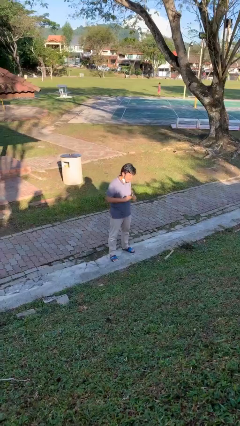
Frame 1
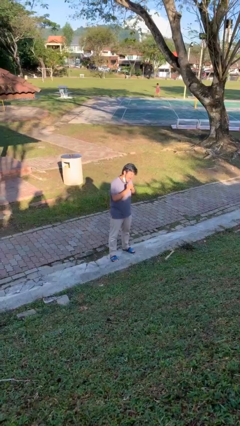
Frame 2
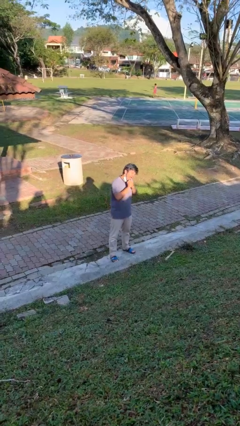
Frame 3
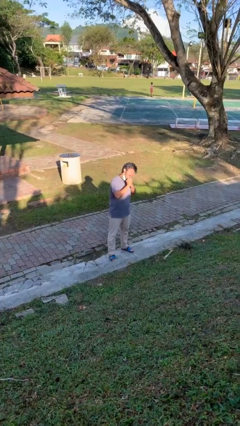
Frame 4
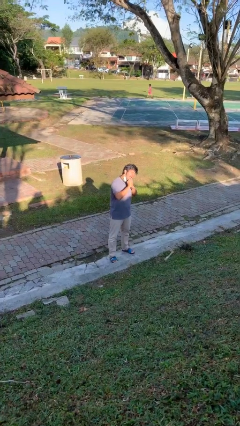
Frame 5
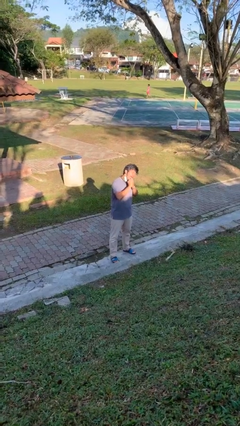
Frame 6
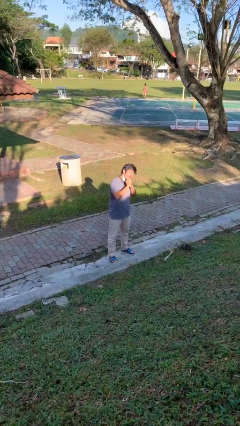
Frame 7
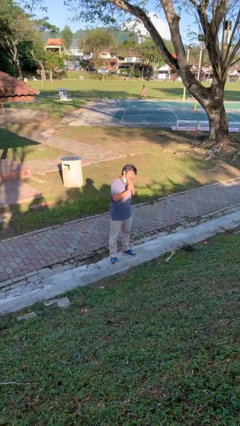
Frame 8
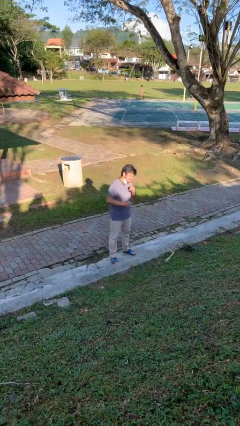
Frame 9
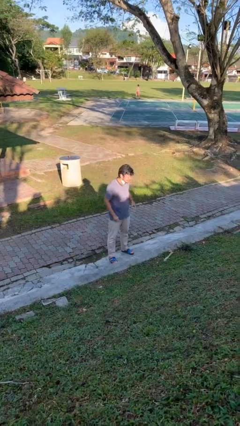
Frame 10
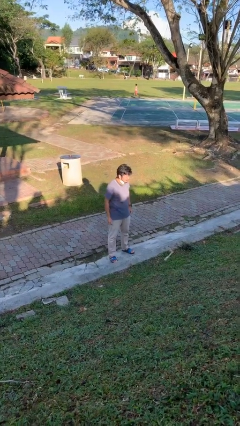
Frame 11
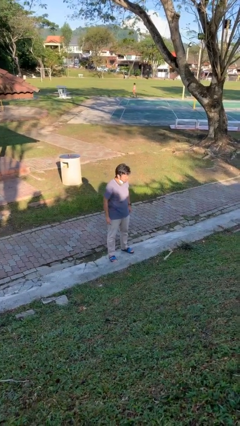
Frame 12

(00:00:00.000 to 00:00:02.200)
person flosses

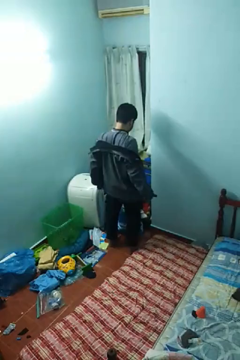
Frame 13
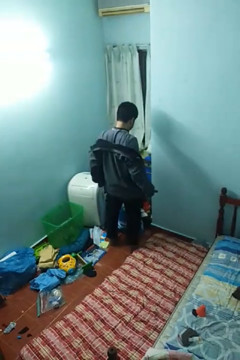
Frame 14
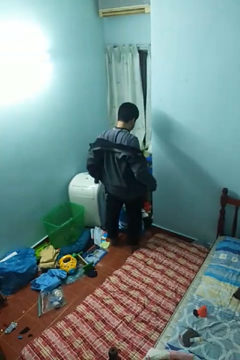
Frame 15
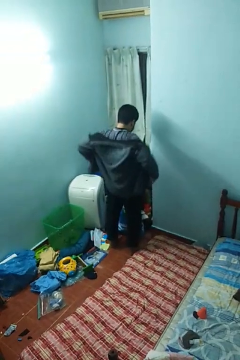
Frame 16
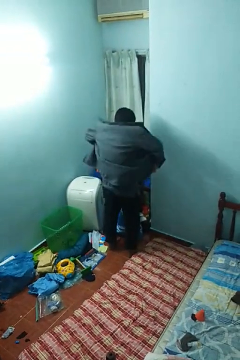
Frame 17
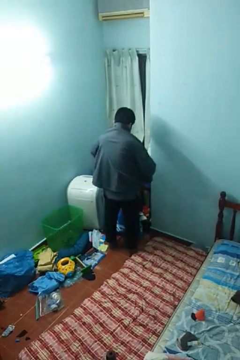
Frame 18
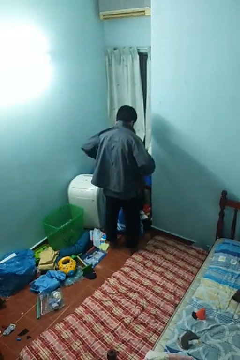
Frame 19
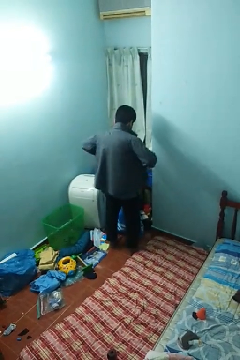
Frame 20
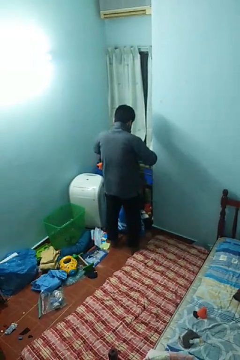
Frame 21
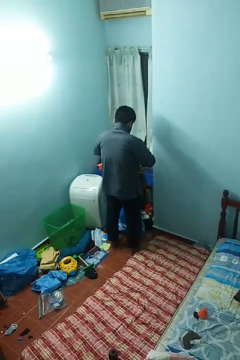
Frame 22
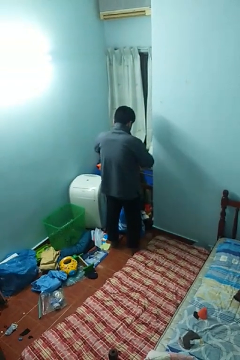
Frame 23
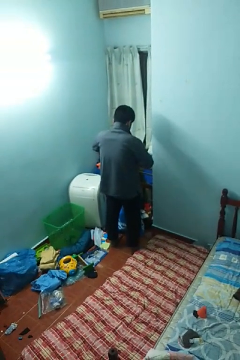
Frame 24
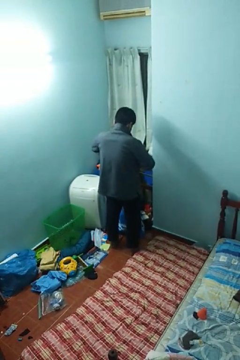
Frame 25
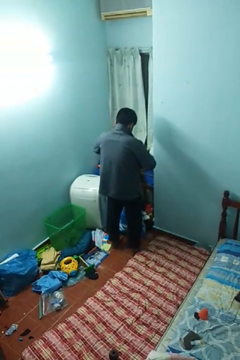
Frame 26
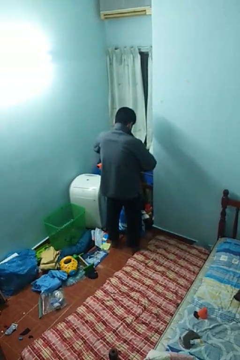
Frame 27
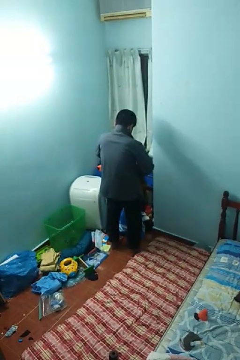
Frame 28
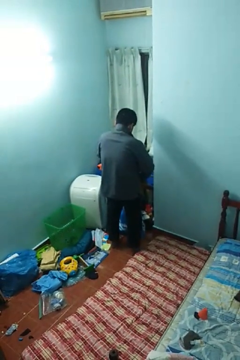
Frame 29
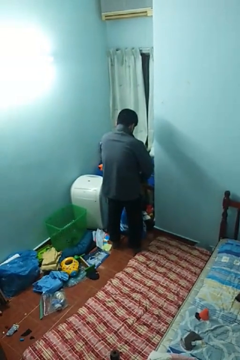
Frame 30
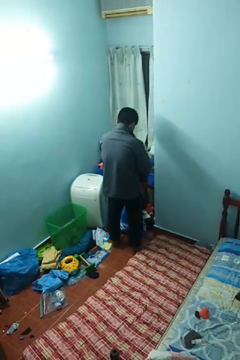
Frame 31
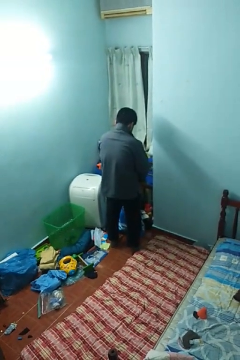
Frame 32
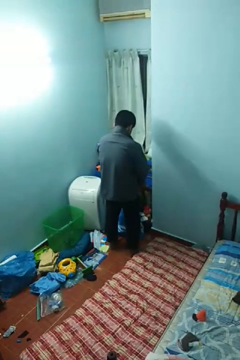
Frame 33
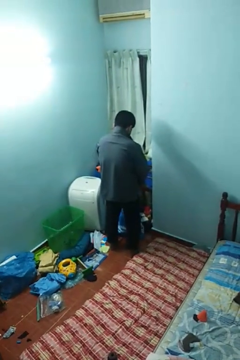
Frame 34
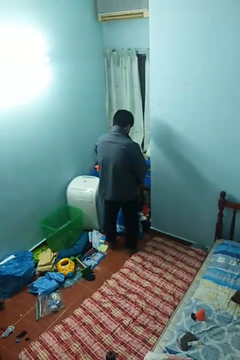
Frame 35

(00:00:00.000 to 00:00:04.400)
person buttons shirt

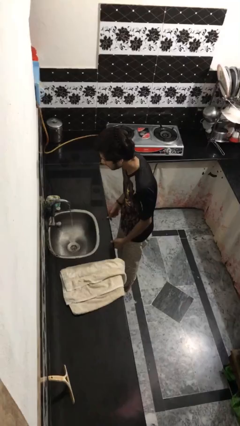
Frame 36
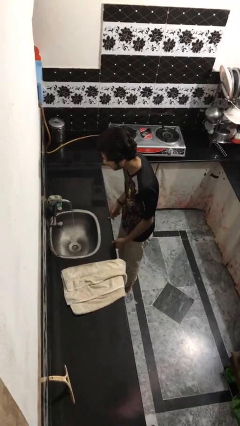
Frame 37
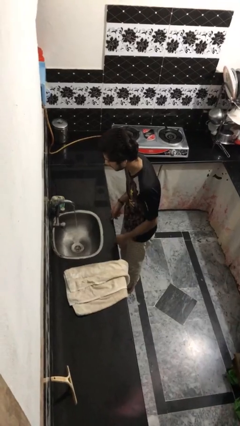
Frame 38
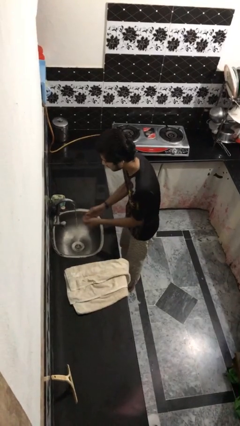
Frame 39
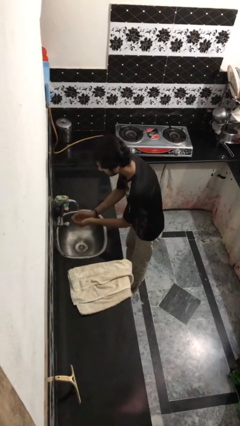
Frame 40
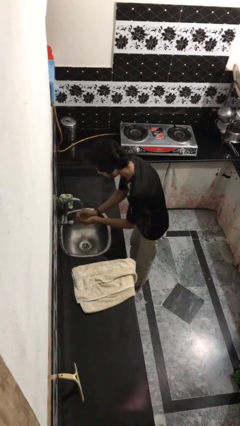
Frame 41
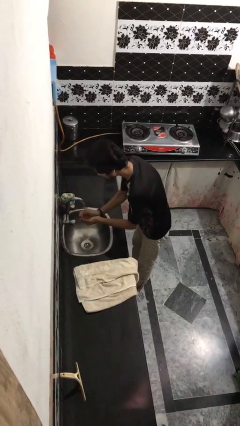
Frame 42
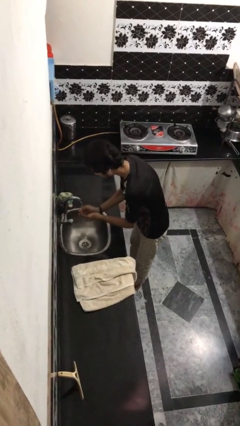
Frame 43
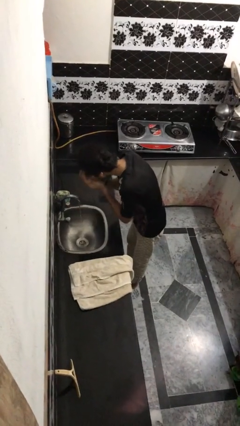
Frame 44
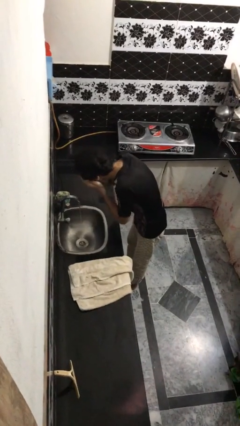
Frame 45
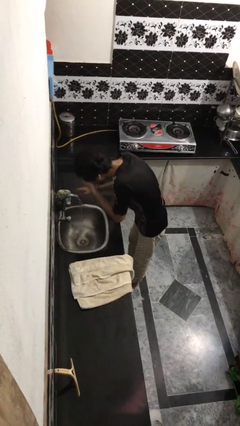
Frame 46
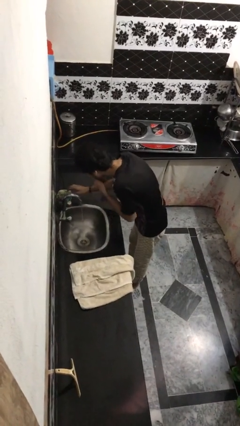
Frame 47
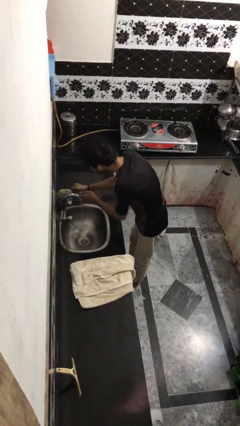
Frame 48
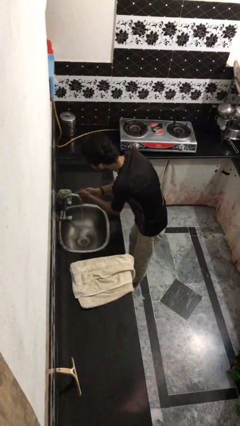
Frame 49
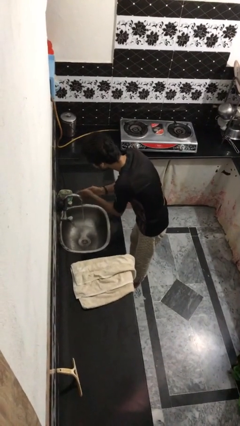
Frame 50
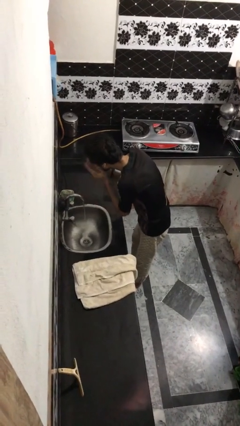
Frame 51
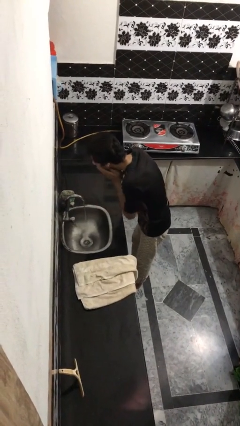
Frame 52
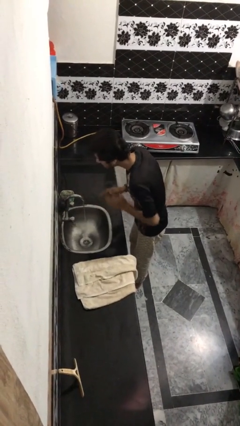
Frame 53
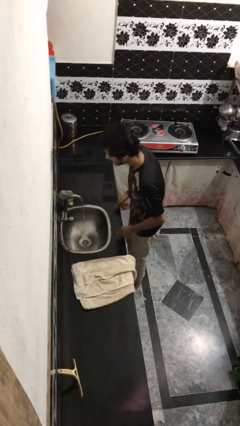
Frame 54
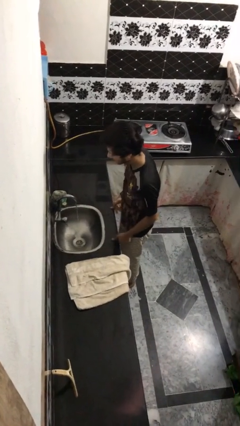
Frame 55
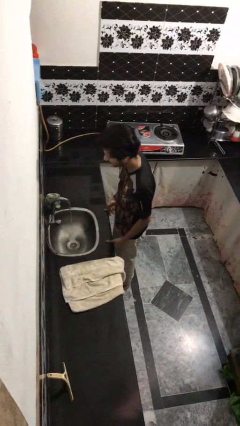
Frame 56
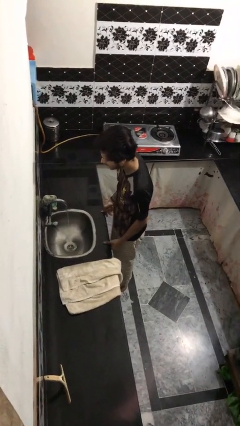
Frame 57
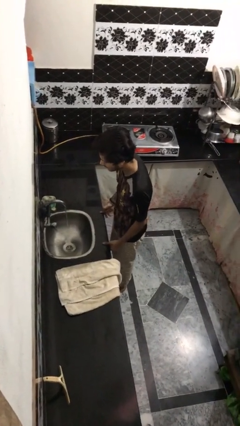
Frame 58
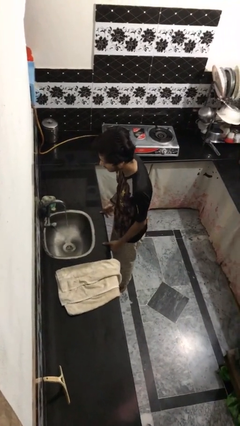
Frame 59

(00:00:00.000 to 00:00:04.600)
person washes face

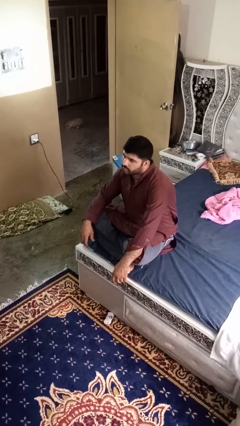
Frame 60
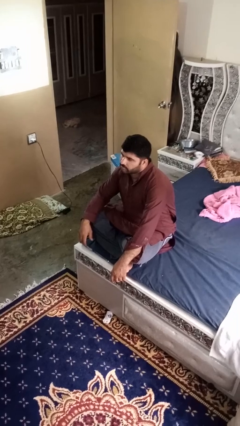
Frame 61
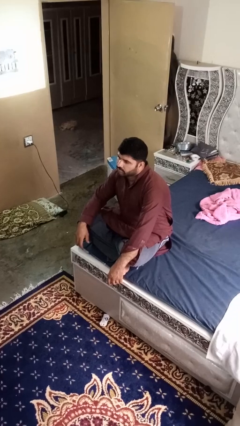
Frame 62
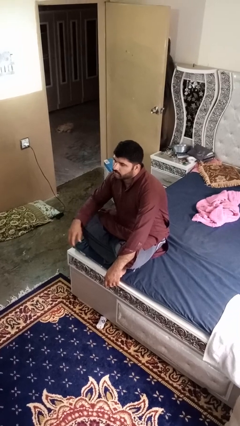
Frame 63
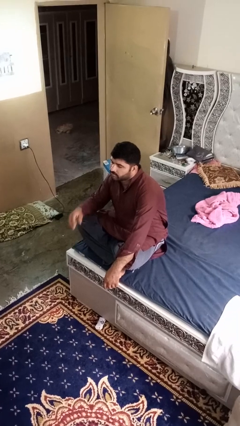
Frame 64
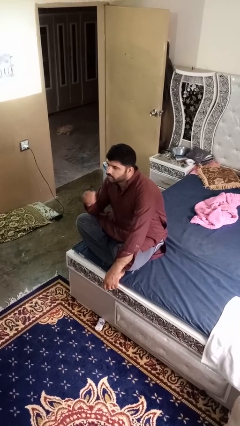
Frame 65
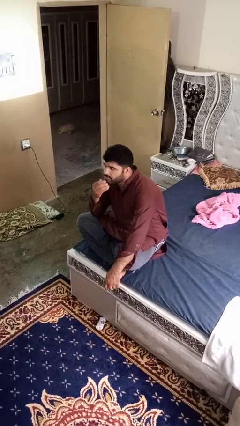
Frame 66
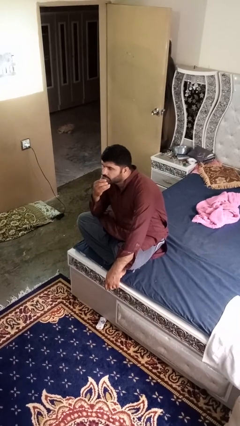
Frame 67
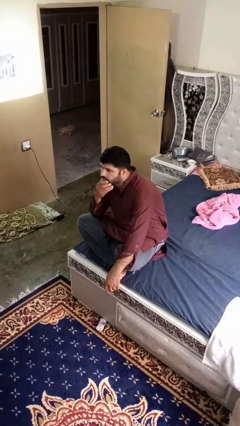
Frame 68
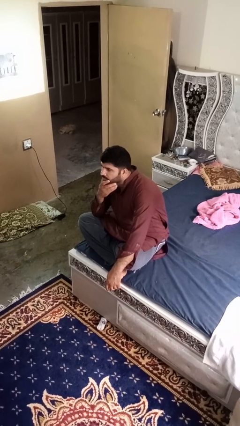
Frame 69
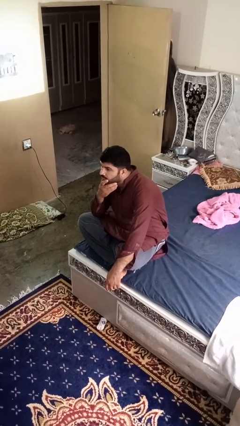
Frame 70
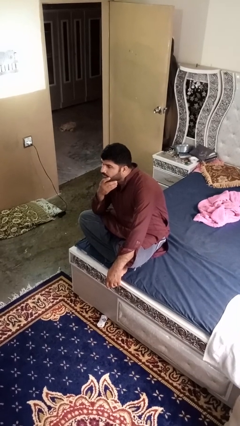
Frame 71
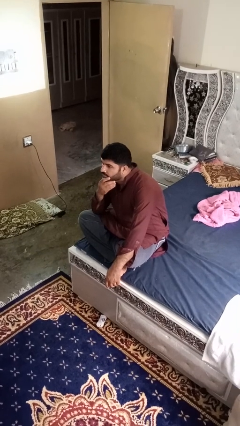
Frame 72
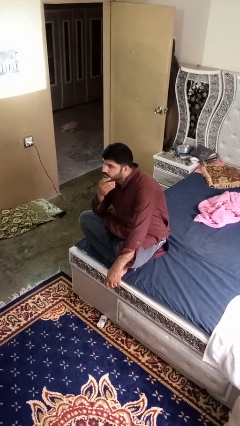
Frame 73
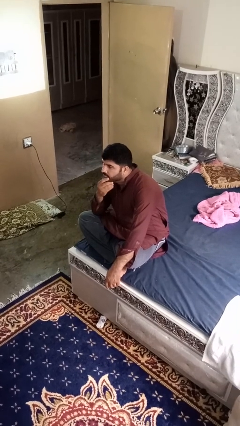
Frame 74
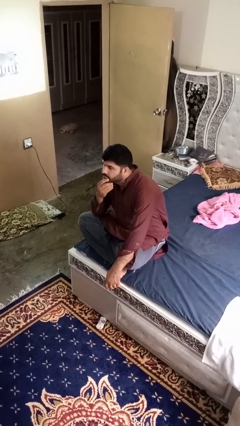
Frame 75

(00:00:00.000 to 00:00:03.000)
person strokes chin

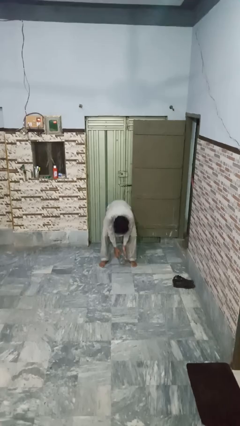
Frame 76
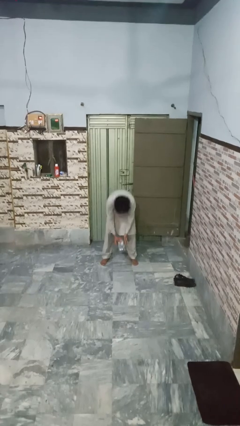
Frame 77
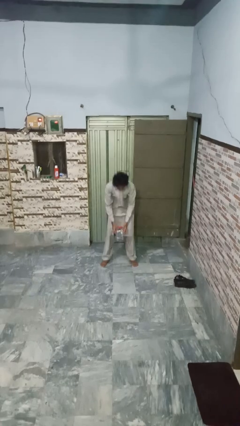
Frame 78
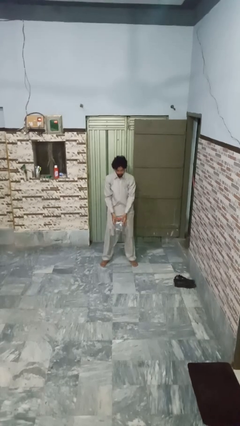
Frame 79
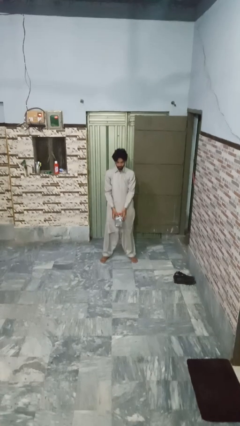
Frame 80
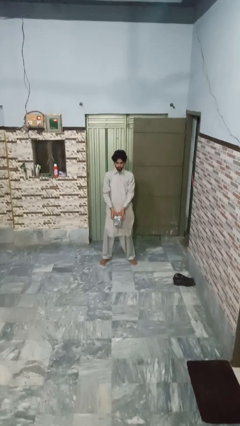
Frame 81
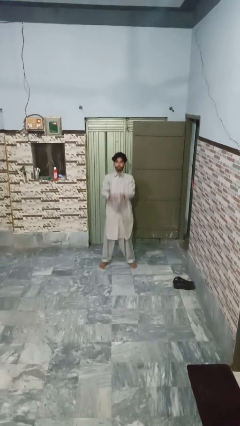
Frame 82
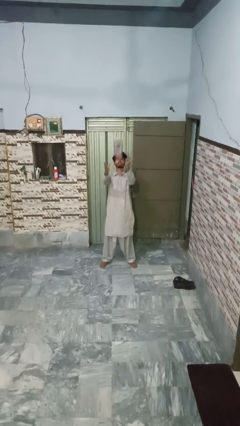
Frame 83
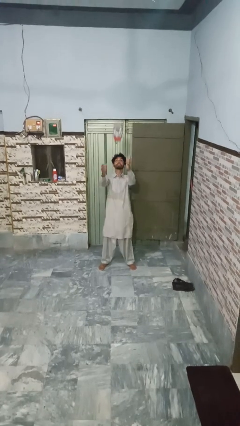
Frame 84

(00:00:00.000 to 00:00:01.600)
person picks up object from floor

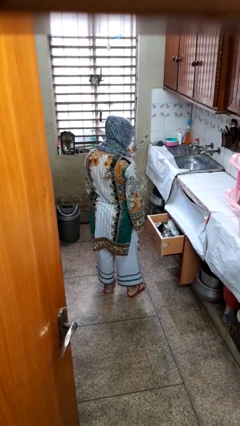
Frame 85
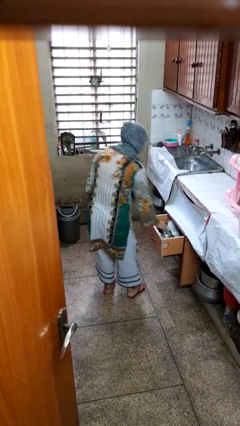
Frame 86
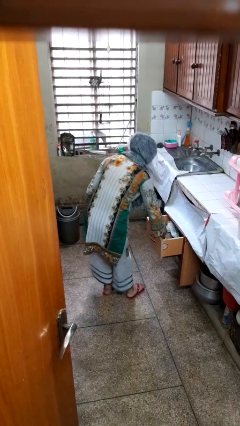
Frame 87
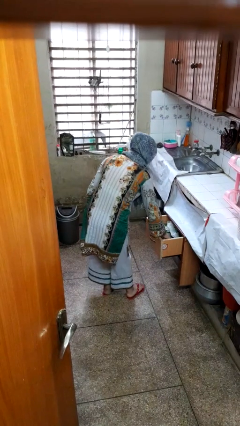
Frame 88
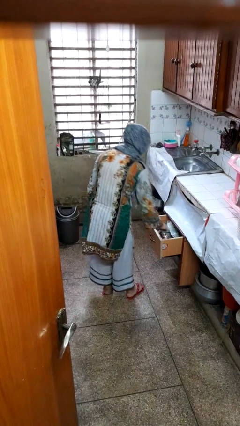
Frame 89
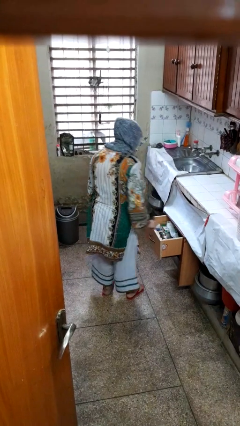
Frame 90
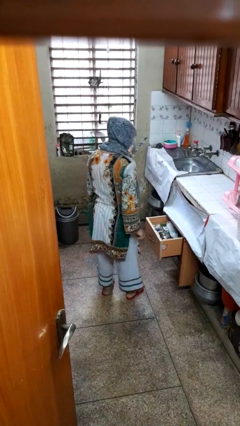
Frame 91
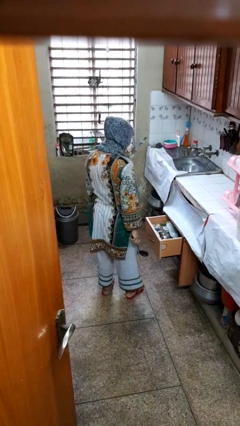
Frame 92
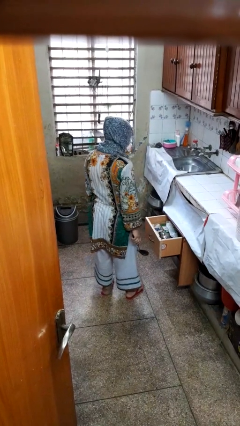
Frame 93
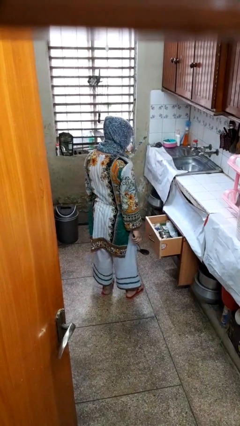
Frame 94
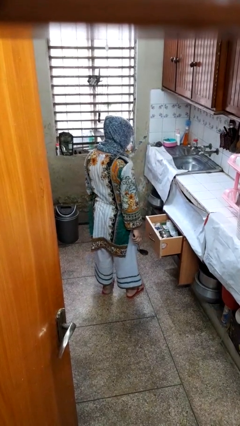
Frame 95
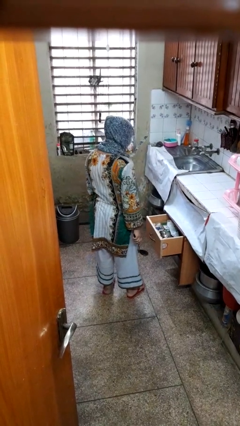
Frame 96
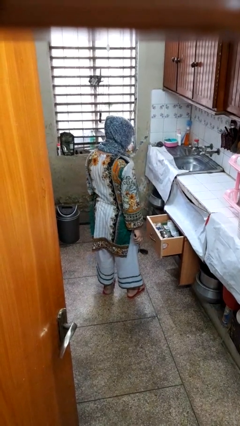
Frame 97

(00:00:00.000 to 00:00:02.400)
person takes object from kitchen drawer
